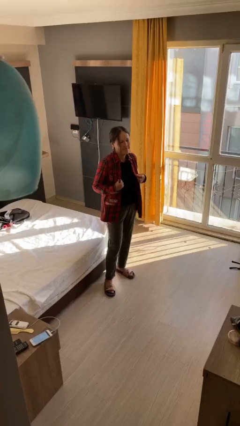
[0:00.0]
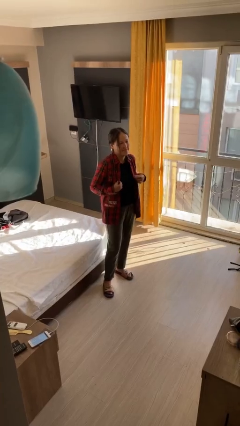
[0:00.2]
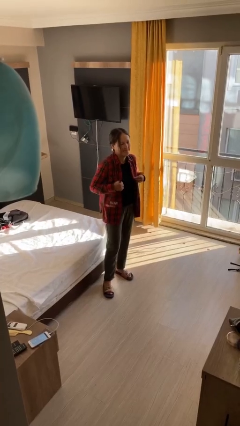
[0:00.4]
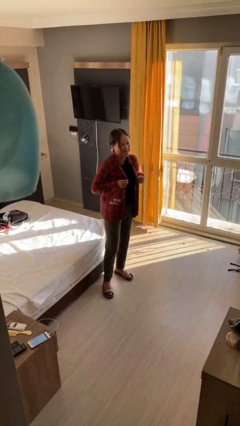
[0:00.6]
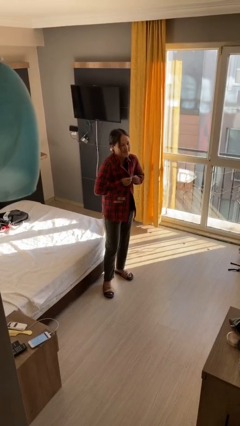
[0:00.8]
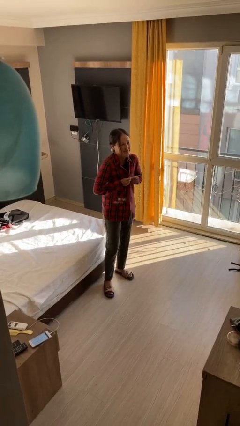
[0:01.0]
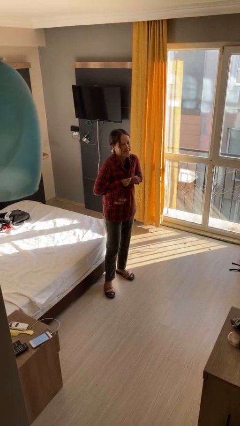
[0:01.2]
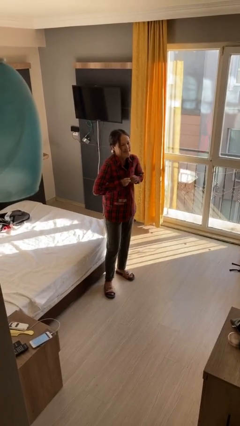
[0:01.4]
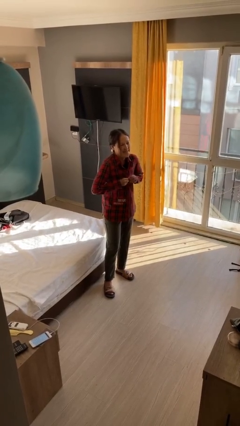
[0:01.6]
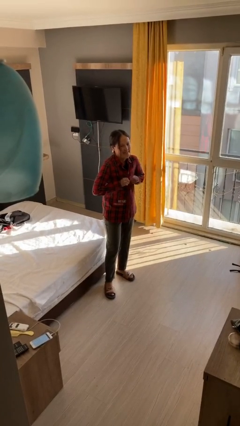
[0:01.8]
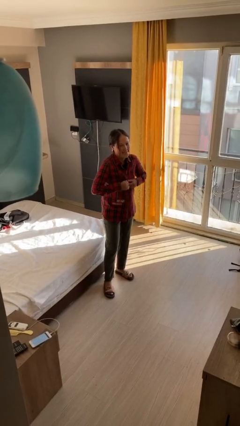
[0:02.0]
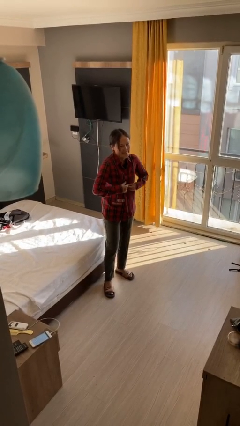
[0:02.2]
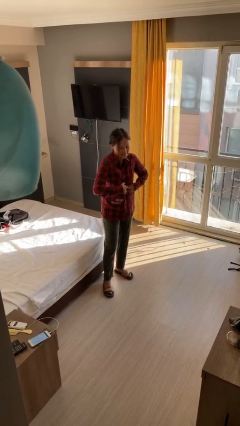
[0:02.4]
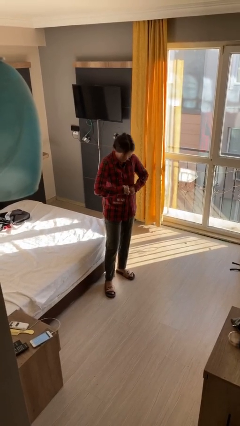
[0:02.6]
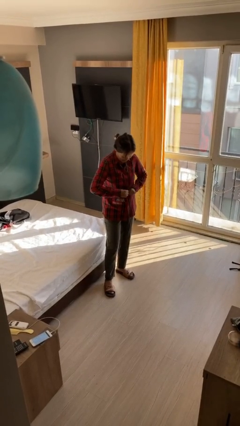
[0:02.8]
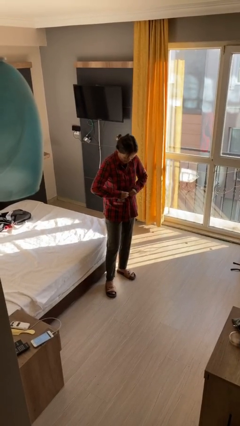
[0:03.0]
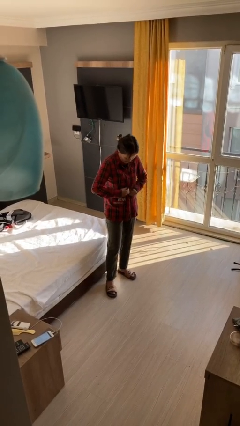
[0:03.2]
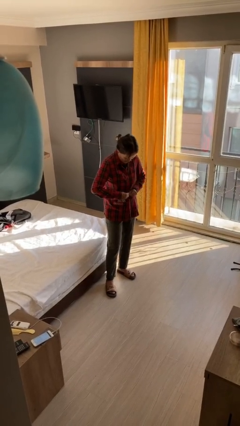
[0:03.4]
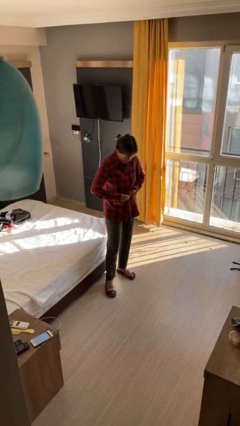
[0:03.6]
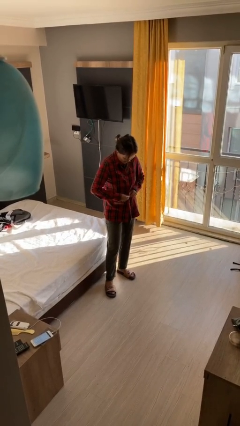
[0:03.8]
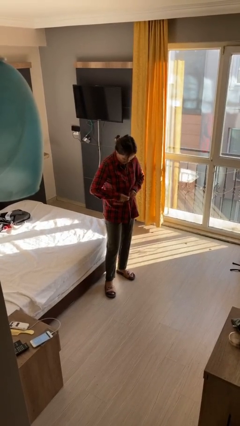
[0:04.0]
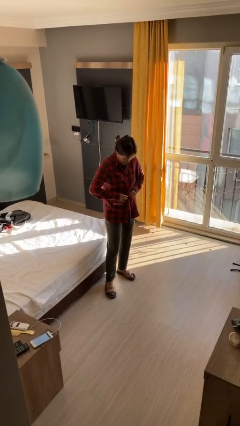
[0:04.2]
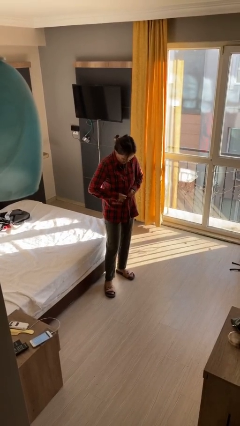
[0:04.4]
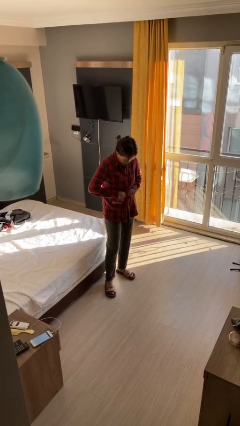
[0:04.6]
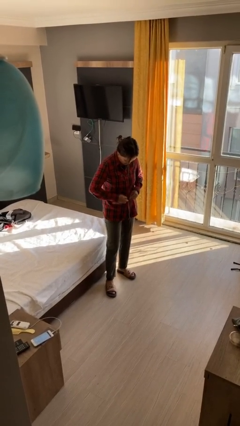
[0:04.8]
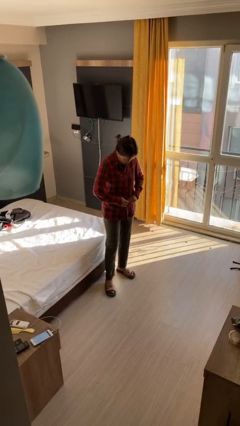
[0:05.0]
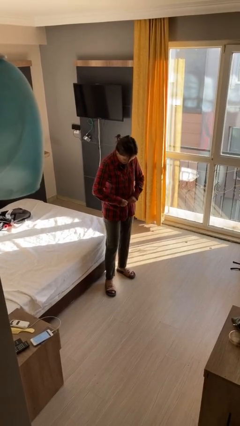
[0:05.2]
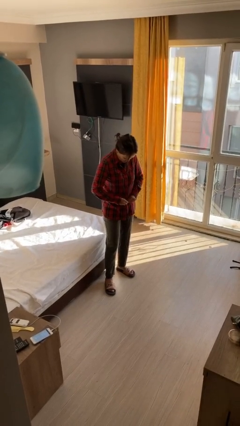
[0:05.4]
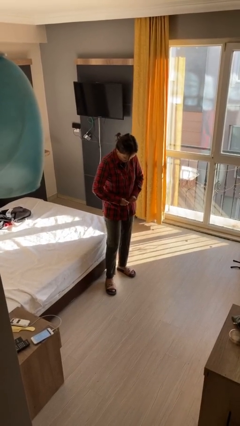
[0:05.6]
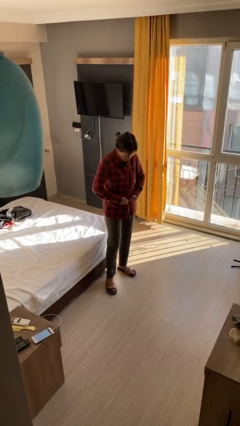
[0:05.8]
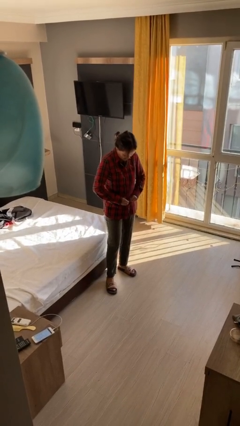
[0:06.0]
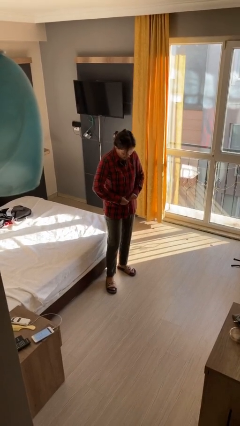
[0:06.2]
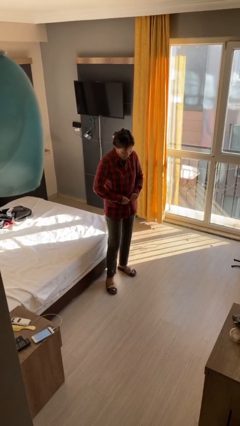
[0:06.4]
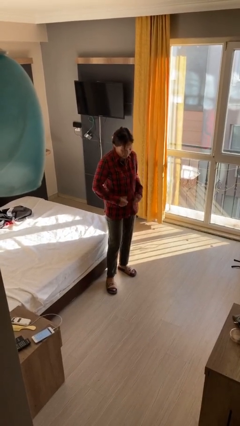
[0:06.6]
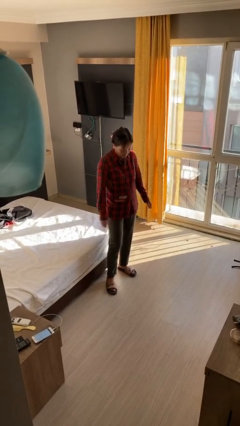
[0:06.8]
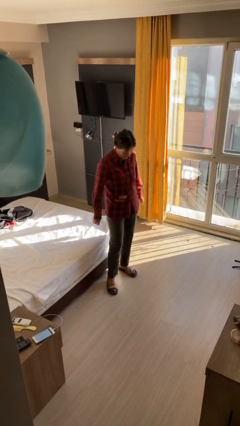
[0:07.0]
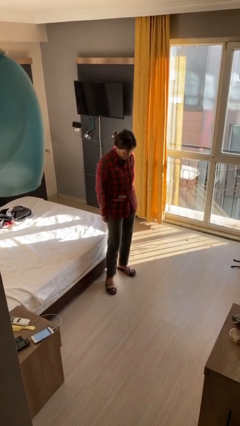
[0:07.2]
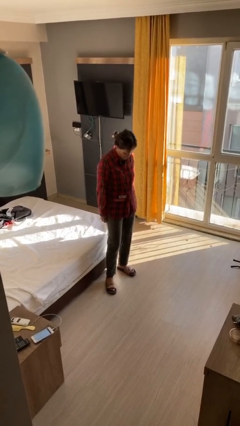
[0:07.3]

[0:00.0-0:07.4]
person buttons shirt

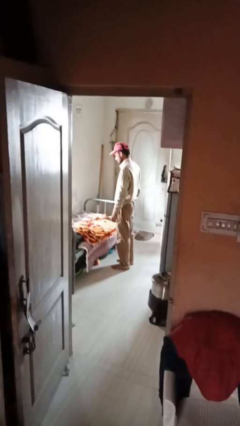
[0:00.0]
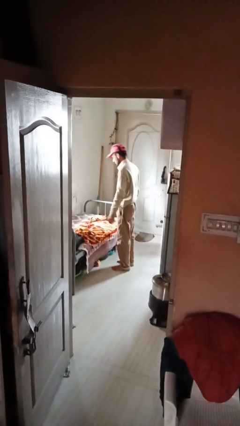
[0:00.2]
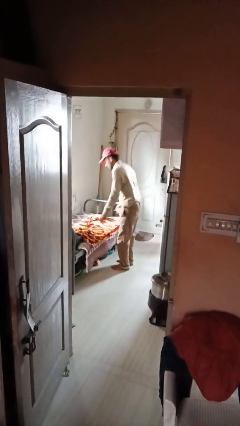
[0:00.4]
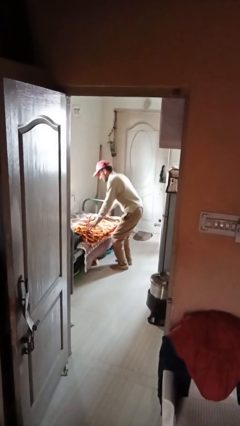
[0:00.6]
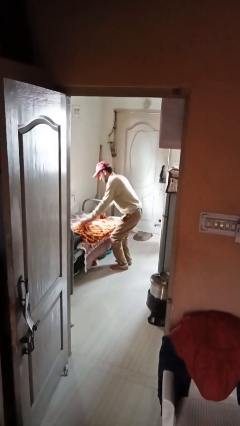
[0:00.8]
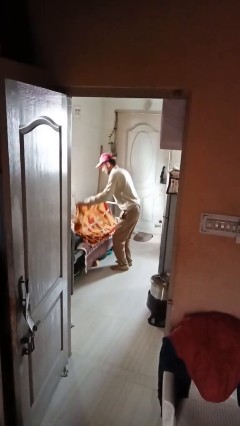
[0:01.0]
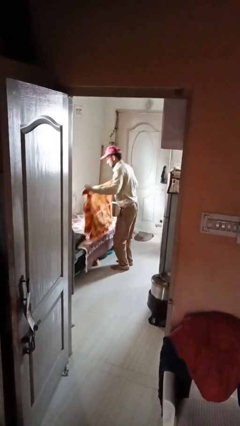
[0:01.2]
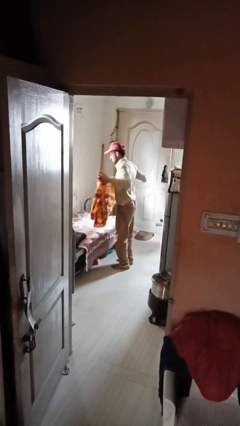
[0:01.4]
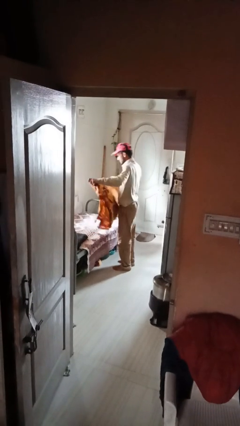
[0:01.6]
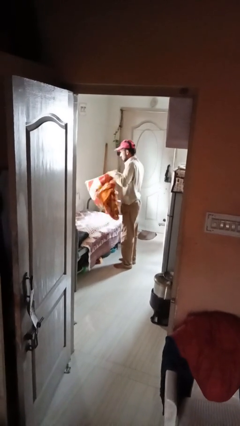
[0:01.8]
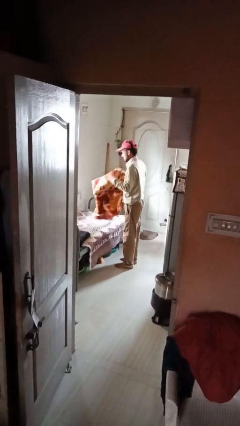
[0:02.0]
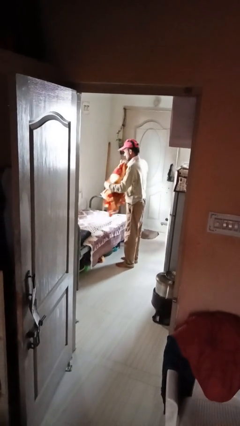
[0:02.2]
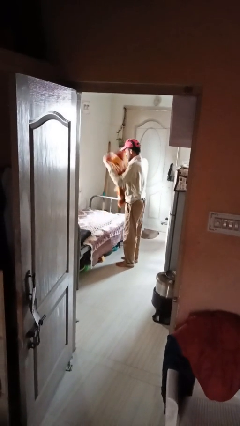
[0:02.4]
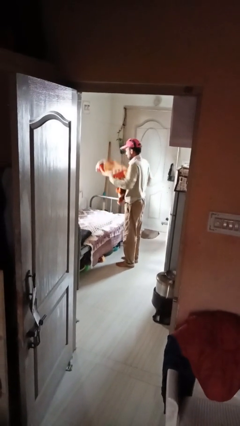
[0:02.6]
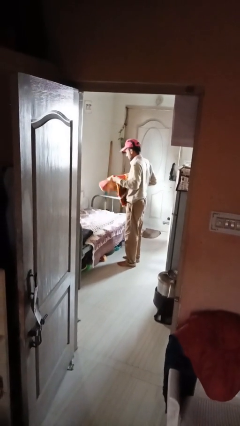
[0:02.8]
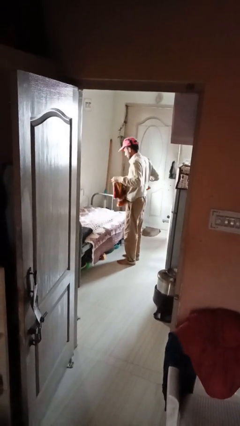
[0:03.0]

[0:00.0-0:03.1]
person folds blanket

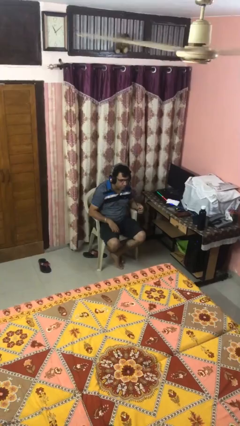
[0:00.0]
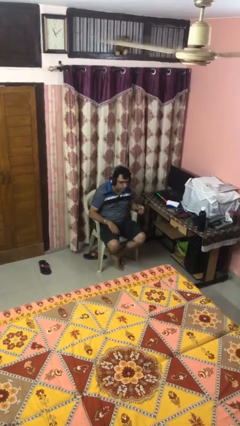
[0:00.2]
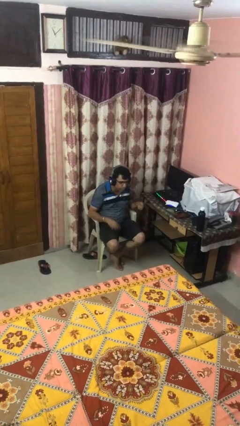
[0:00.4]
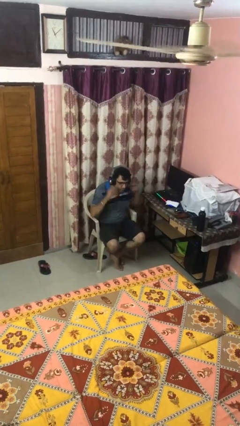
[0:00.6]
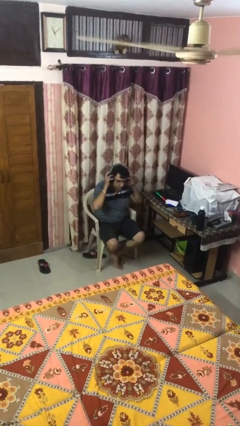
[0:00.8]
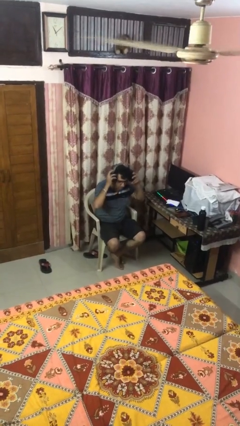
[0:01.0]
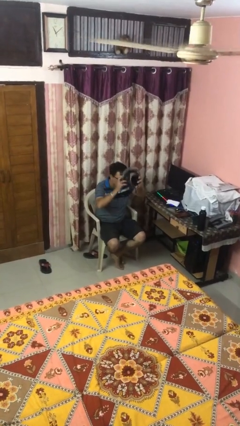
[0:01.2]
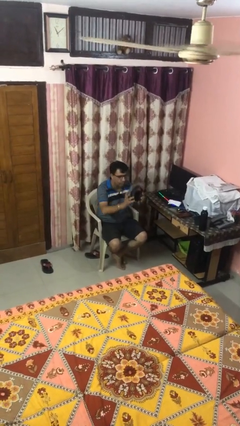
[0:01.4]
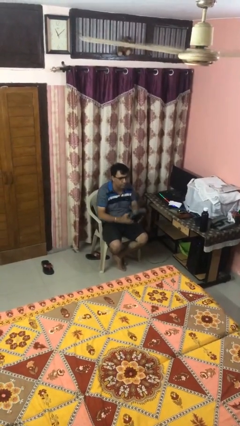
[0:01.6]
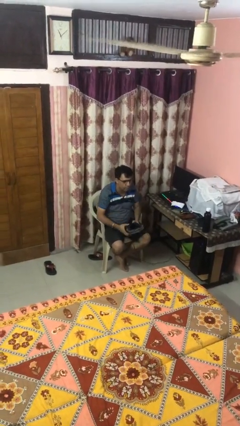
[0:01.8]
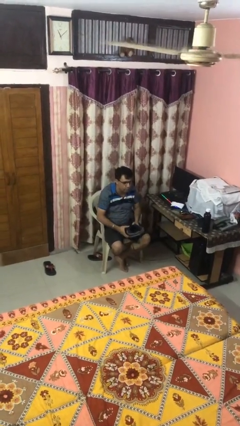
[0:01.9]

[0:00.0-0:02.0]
person takes off headphones

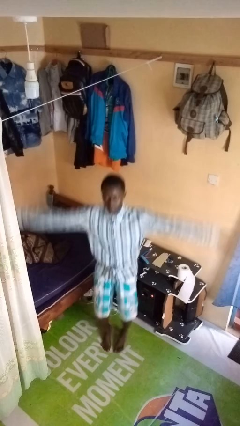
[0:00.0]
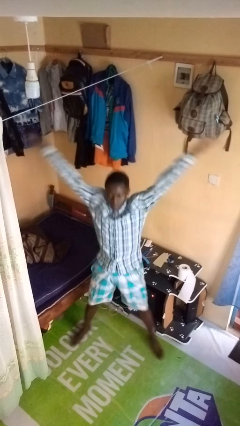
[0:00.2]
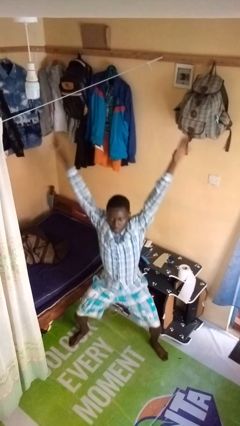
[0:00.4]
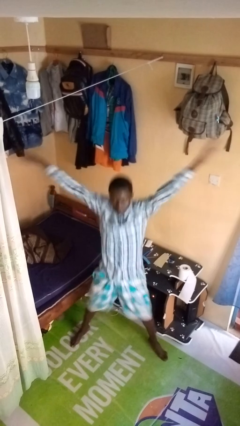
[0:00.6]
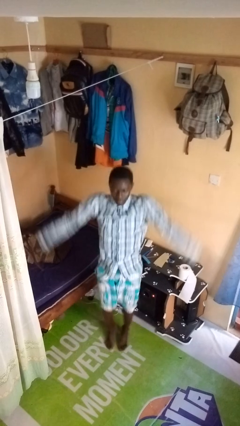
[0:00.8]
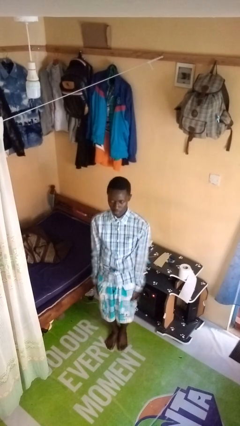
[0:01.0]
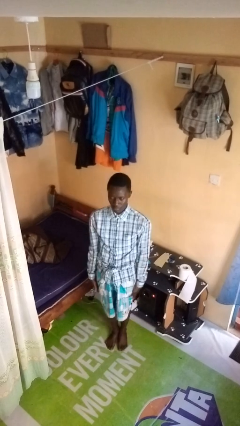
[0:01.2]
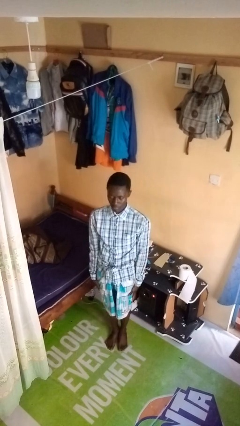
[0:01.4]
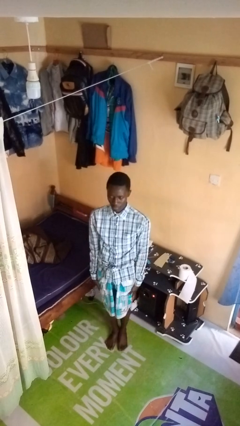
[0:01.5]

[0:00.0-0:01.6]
person exercises with jumping jacks

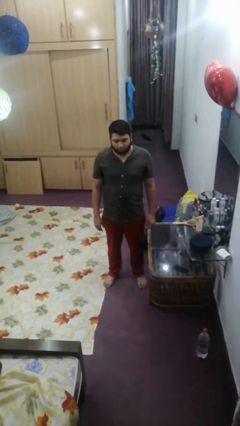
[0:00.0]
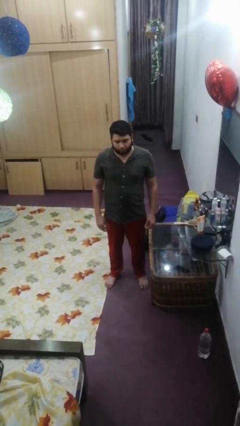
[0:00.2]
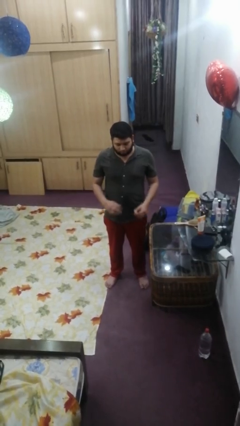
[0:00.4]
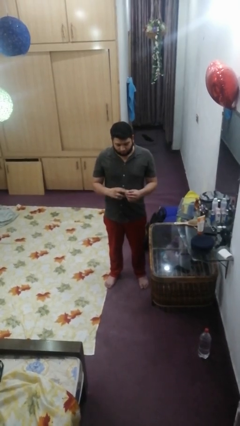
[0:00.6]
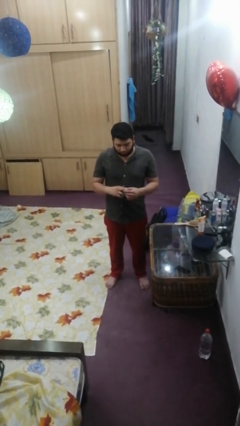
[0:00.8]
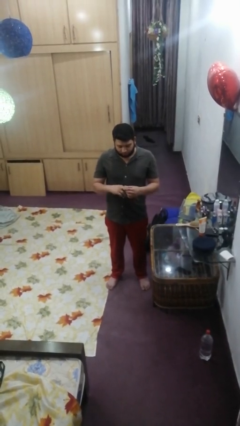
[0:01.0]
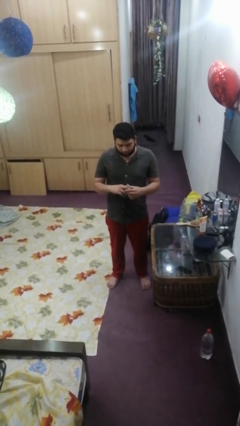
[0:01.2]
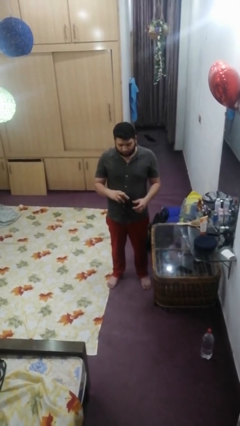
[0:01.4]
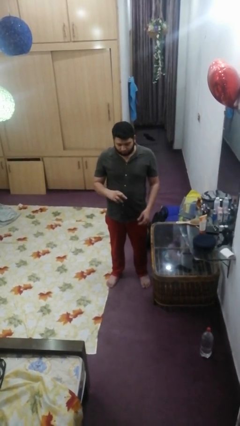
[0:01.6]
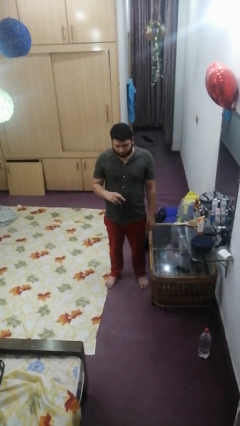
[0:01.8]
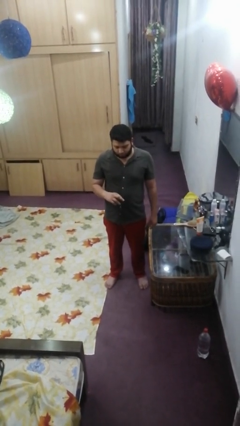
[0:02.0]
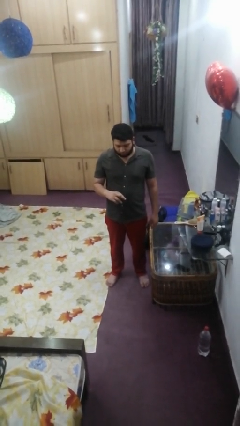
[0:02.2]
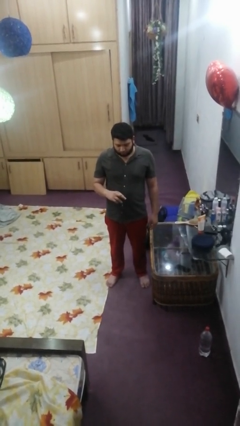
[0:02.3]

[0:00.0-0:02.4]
person puts on ring

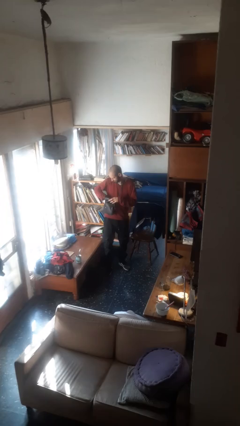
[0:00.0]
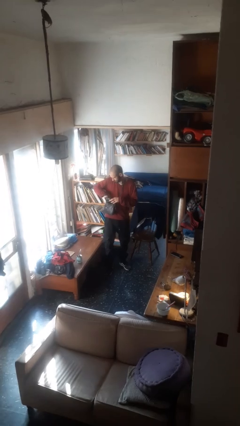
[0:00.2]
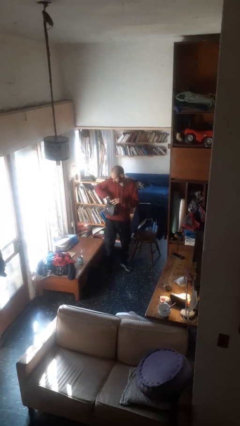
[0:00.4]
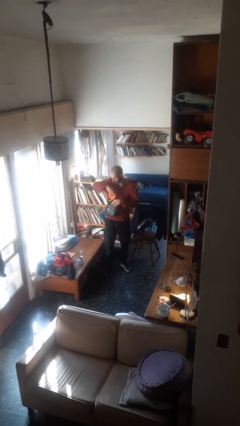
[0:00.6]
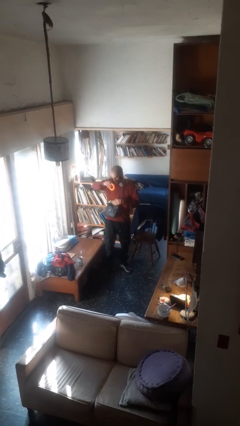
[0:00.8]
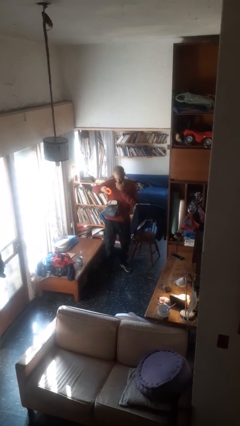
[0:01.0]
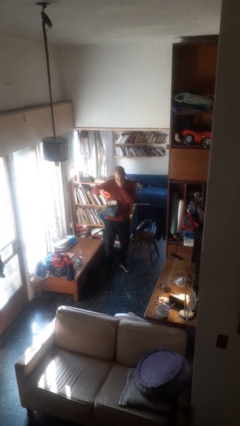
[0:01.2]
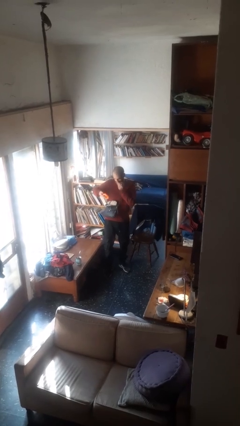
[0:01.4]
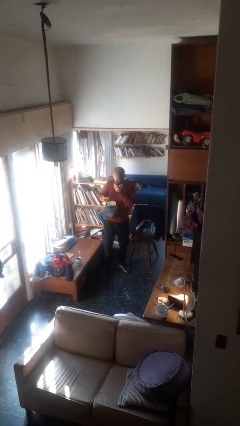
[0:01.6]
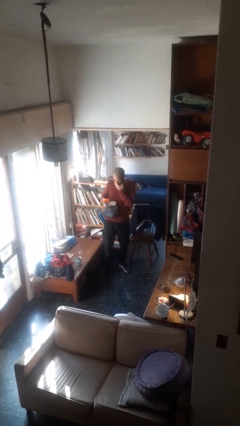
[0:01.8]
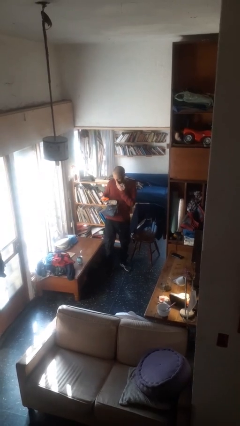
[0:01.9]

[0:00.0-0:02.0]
person takes object from purse
